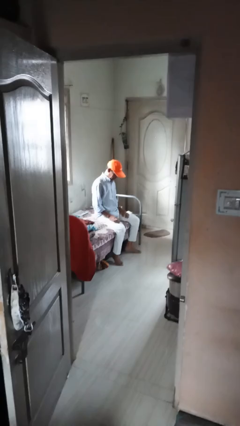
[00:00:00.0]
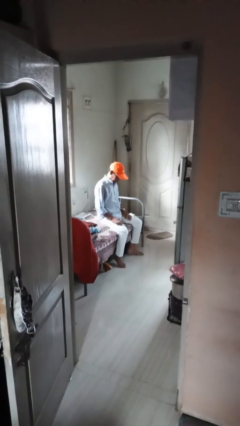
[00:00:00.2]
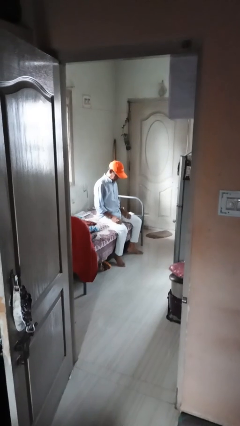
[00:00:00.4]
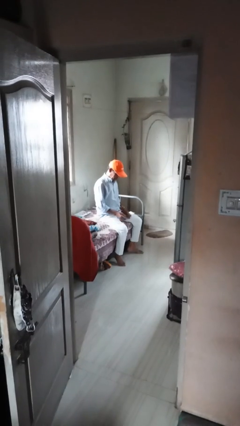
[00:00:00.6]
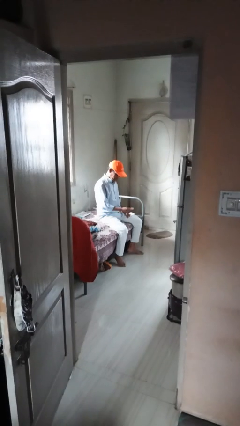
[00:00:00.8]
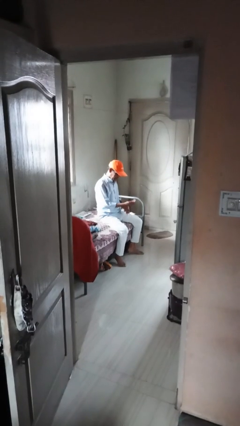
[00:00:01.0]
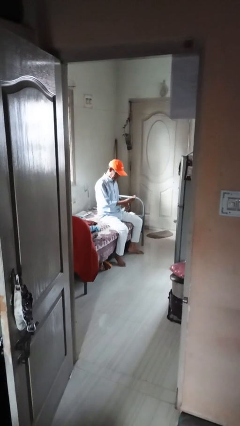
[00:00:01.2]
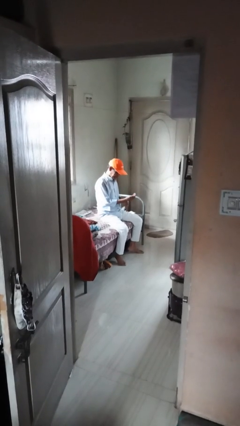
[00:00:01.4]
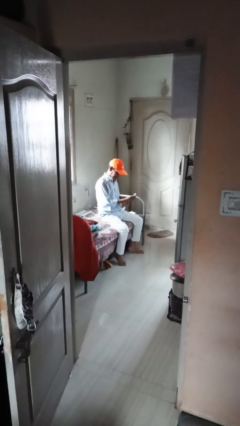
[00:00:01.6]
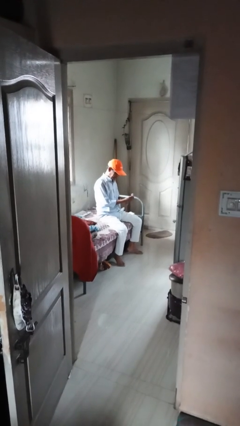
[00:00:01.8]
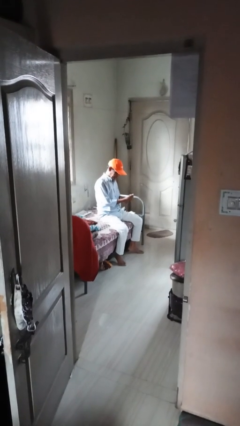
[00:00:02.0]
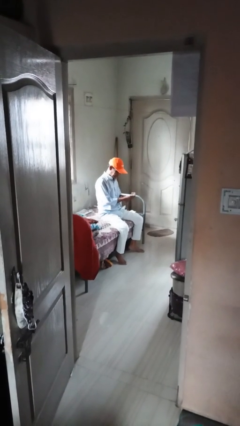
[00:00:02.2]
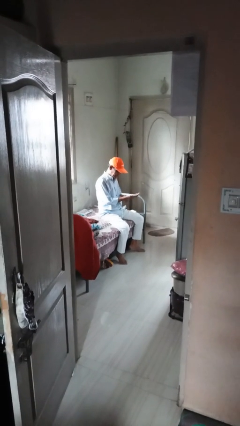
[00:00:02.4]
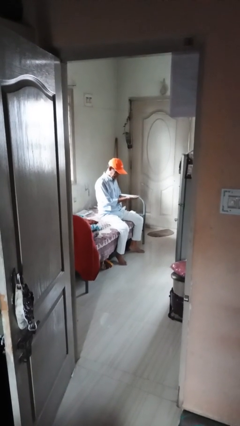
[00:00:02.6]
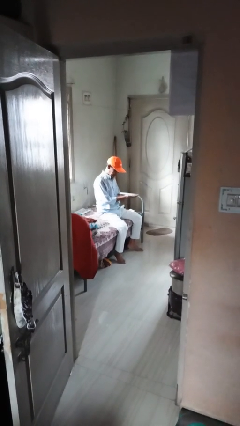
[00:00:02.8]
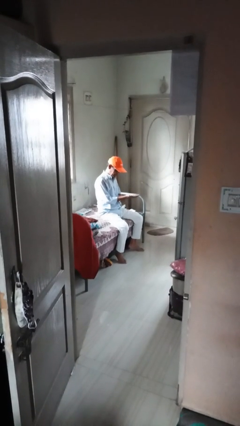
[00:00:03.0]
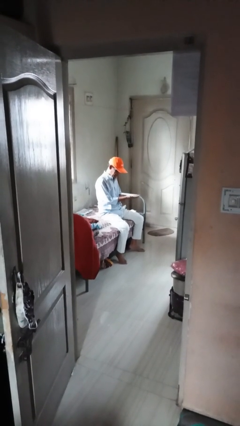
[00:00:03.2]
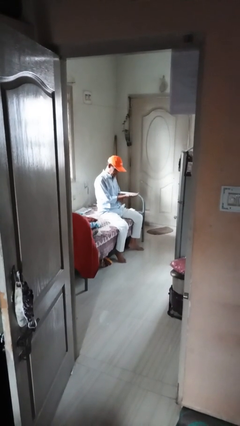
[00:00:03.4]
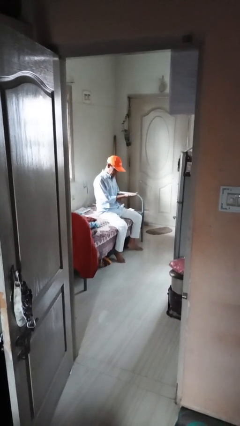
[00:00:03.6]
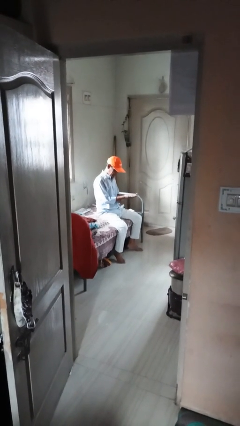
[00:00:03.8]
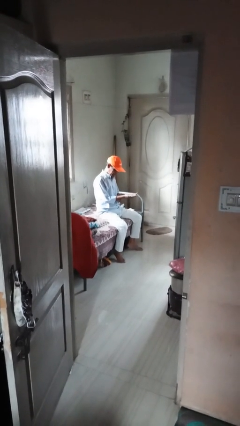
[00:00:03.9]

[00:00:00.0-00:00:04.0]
person looks at hands in lap

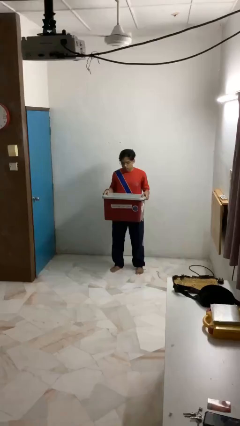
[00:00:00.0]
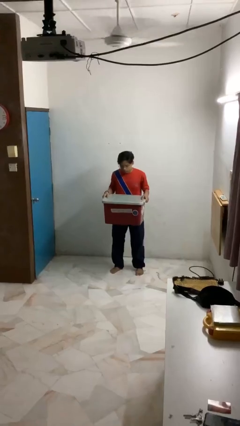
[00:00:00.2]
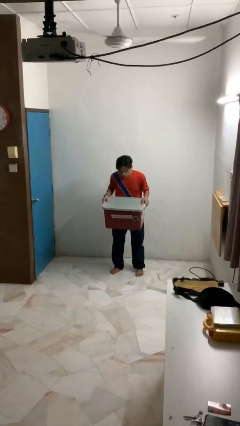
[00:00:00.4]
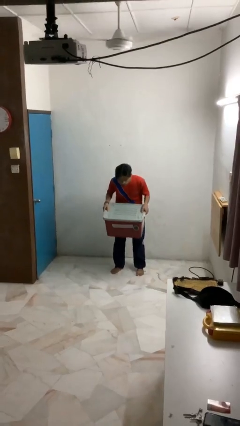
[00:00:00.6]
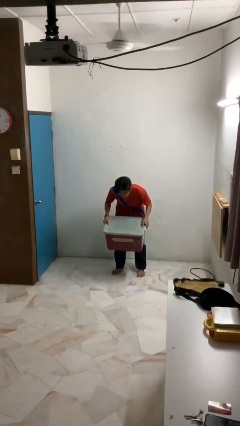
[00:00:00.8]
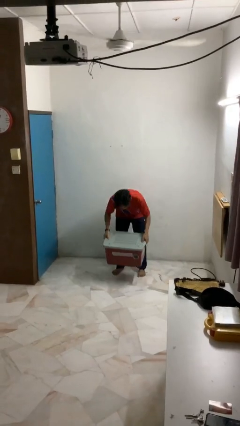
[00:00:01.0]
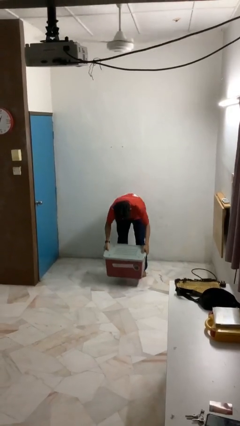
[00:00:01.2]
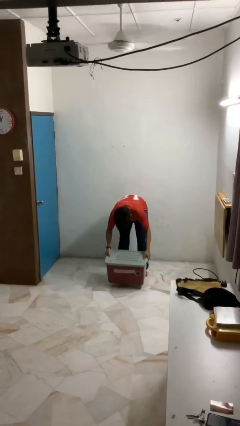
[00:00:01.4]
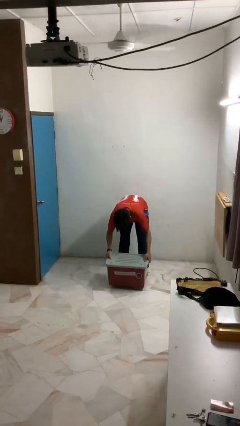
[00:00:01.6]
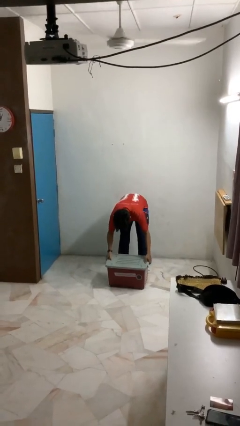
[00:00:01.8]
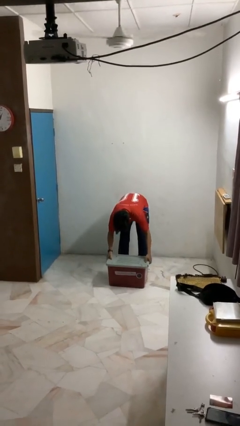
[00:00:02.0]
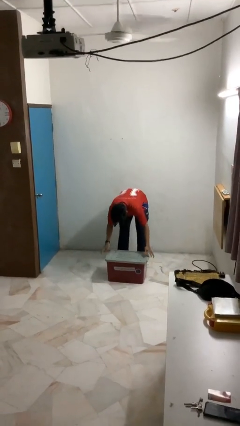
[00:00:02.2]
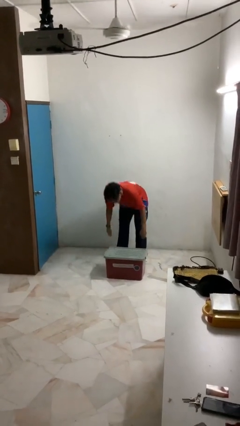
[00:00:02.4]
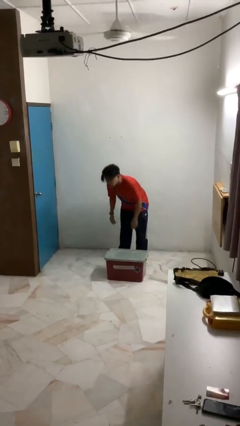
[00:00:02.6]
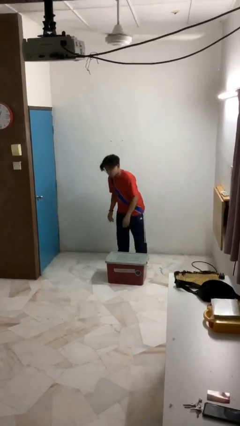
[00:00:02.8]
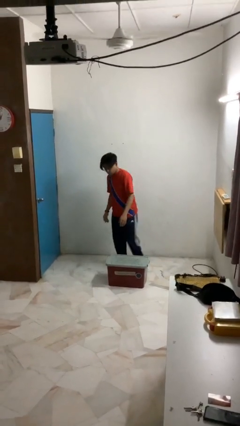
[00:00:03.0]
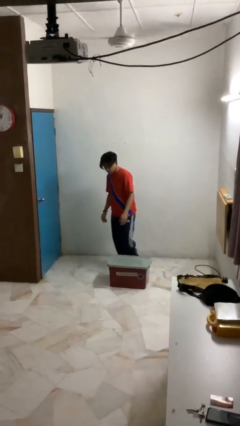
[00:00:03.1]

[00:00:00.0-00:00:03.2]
person puts down object on floor

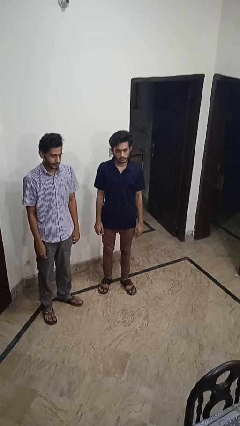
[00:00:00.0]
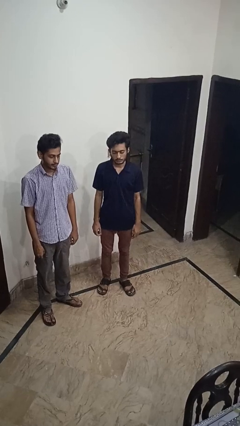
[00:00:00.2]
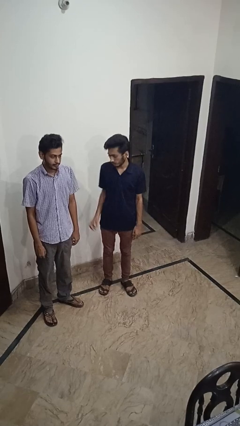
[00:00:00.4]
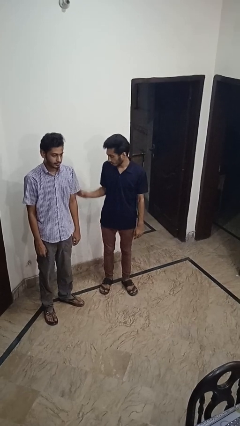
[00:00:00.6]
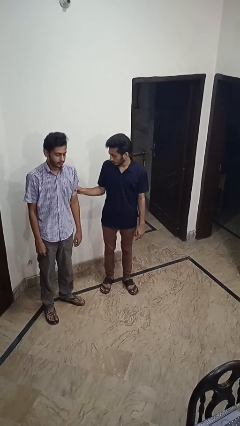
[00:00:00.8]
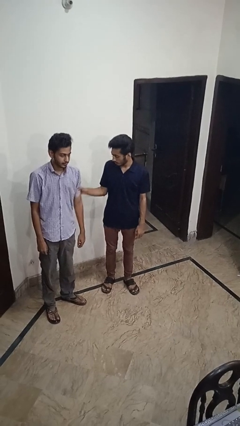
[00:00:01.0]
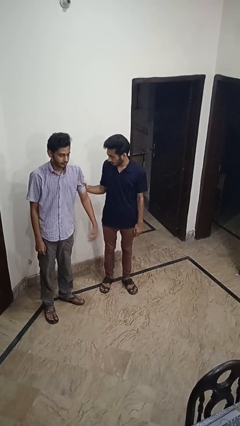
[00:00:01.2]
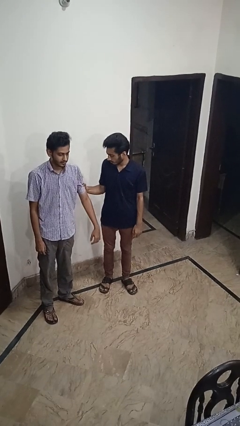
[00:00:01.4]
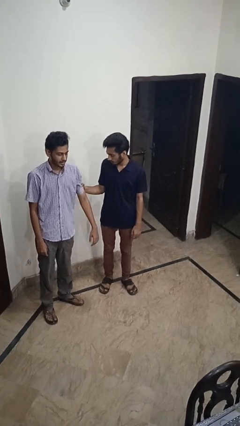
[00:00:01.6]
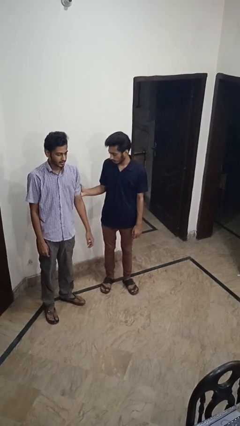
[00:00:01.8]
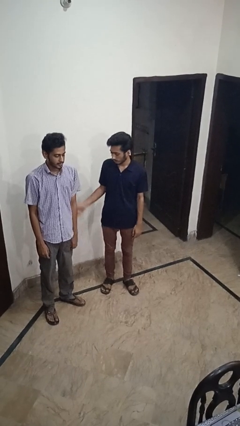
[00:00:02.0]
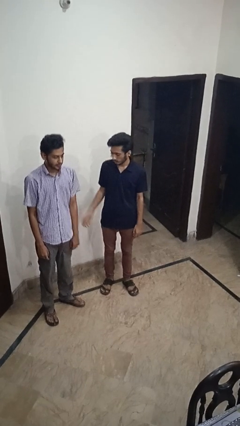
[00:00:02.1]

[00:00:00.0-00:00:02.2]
person grabs person by bicep

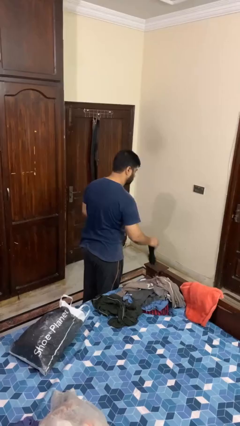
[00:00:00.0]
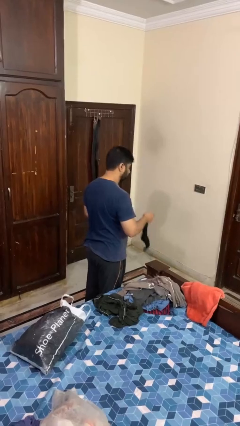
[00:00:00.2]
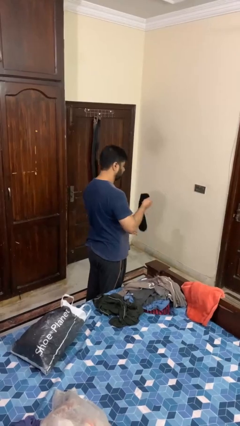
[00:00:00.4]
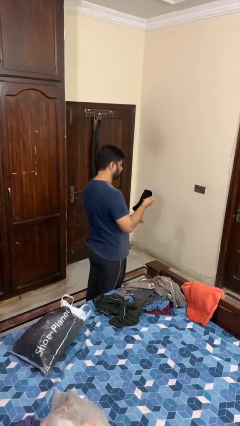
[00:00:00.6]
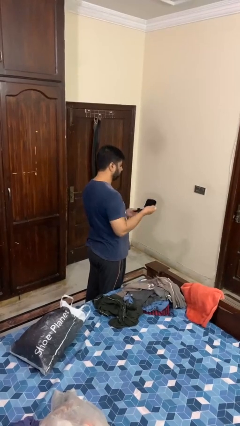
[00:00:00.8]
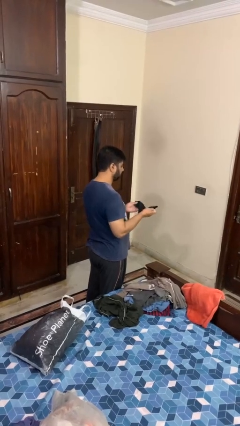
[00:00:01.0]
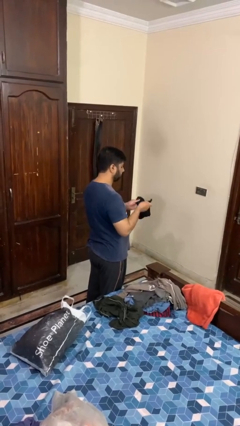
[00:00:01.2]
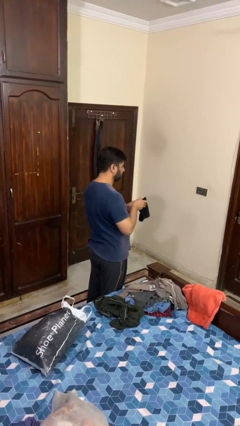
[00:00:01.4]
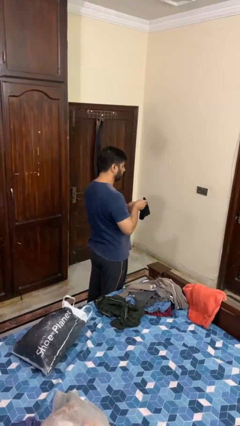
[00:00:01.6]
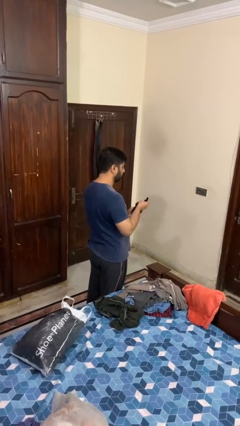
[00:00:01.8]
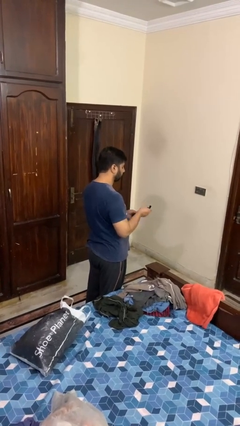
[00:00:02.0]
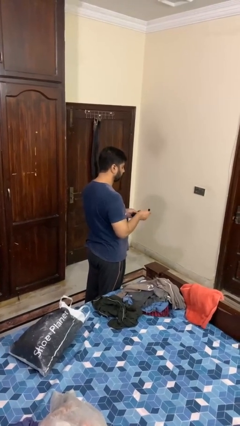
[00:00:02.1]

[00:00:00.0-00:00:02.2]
person folds socks

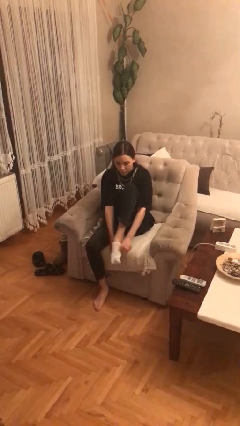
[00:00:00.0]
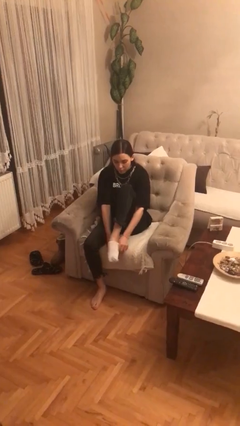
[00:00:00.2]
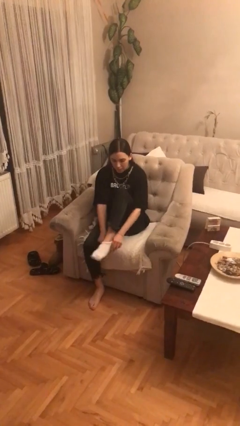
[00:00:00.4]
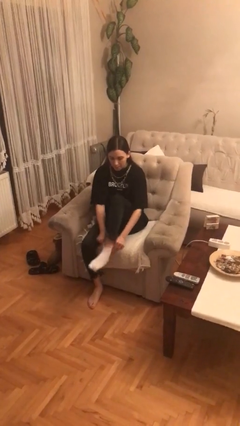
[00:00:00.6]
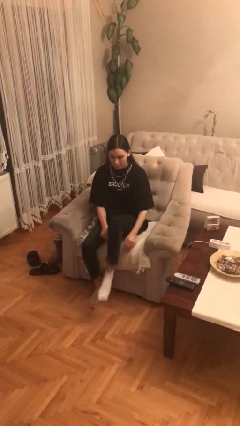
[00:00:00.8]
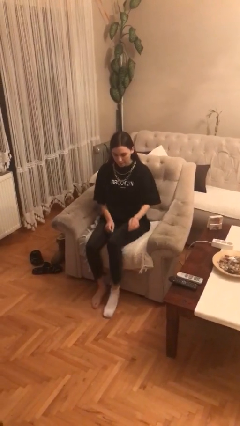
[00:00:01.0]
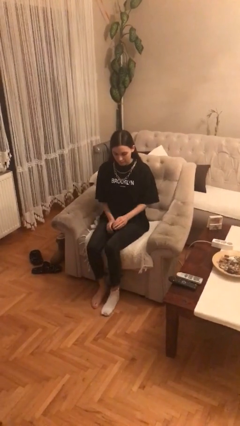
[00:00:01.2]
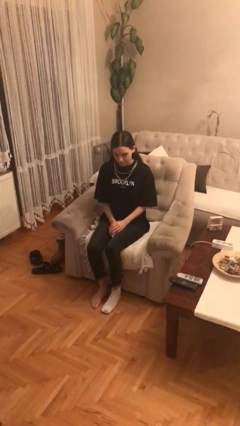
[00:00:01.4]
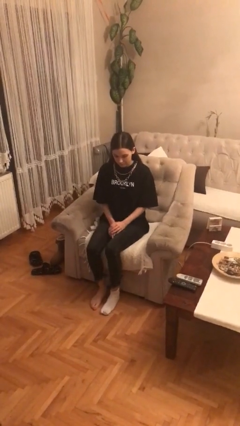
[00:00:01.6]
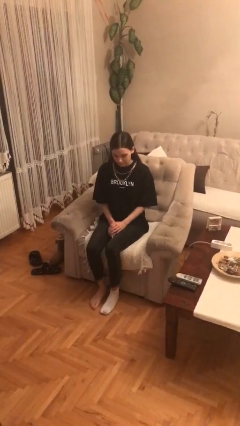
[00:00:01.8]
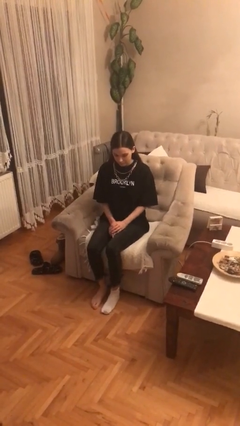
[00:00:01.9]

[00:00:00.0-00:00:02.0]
person puts on socks

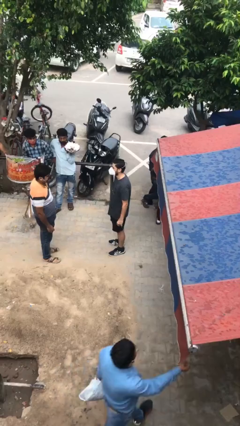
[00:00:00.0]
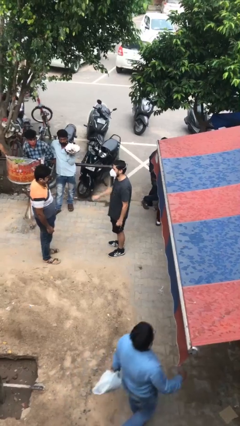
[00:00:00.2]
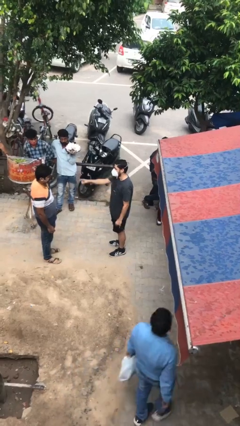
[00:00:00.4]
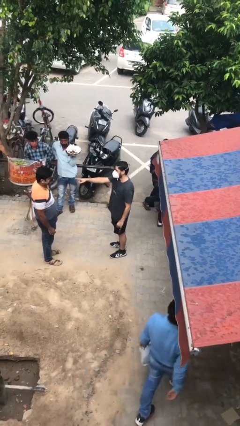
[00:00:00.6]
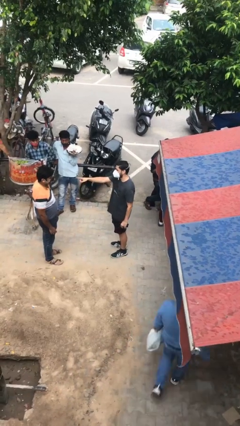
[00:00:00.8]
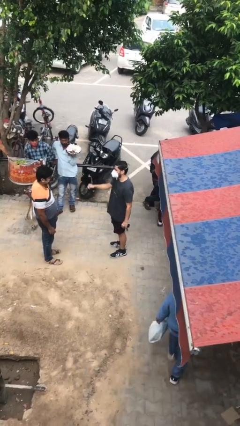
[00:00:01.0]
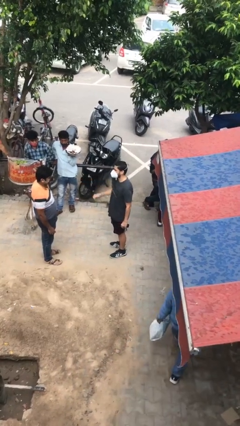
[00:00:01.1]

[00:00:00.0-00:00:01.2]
person points at person

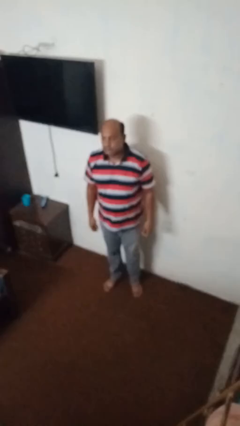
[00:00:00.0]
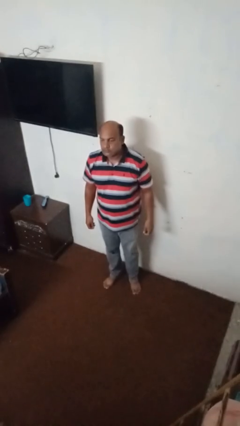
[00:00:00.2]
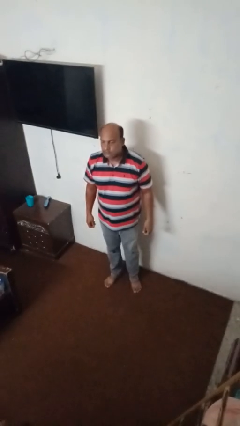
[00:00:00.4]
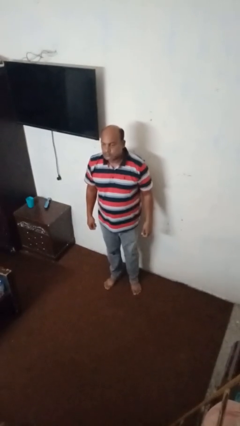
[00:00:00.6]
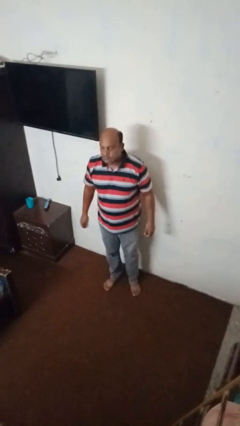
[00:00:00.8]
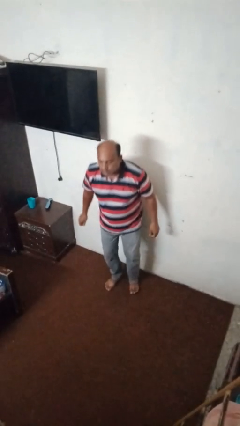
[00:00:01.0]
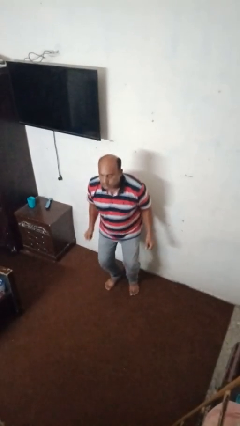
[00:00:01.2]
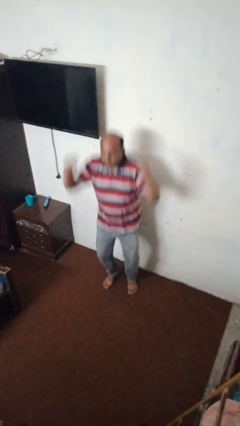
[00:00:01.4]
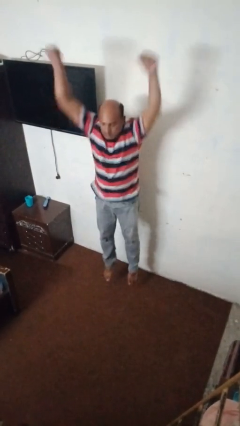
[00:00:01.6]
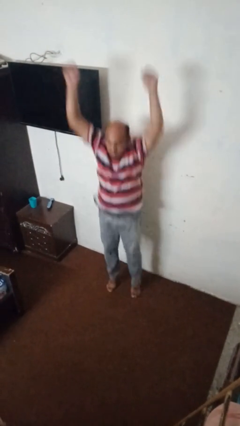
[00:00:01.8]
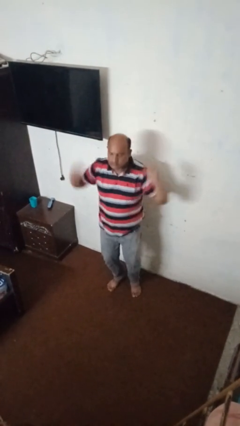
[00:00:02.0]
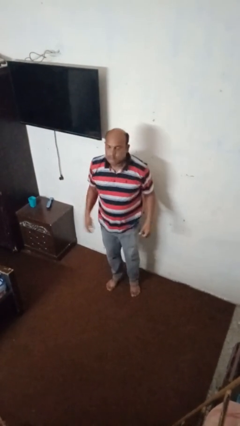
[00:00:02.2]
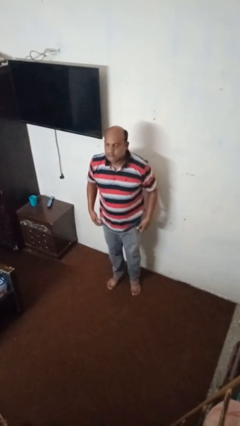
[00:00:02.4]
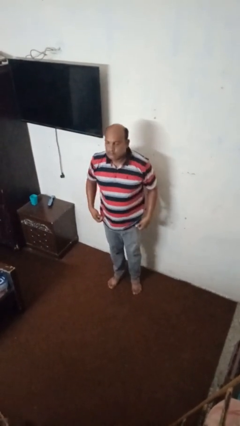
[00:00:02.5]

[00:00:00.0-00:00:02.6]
person jumps
